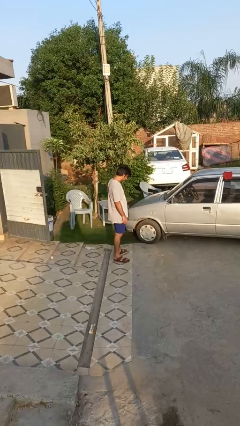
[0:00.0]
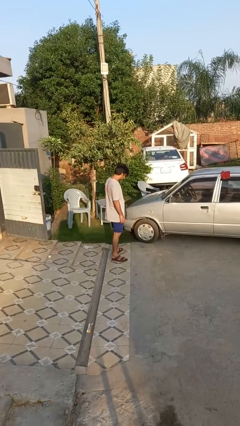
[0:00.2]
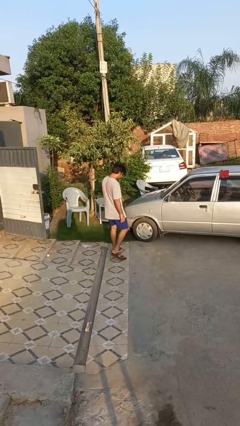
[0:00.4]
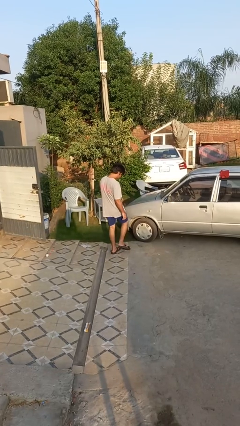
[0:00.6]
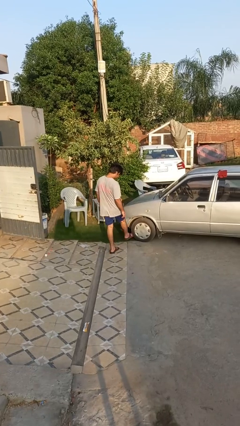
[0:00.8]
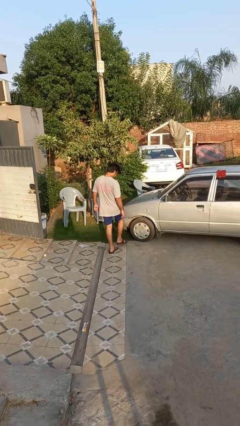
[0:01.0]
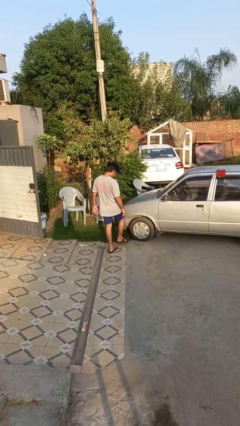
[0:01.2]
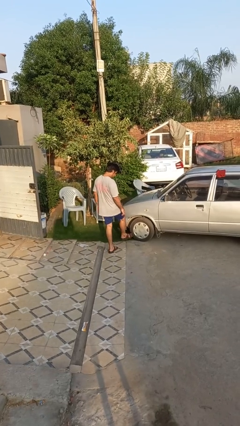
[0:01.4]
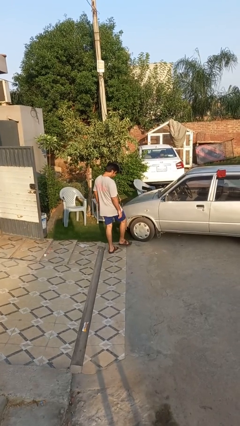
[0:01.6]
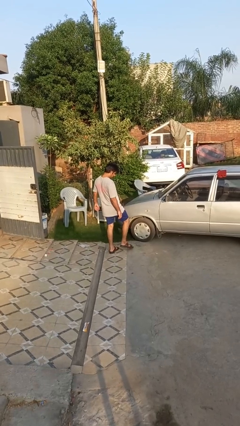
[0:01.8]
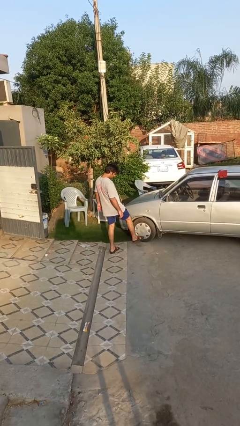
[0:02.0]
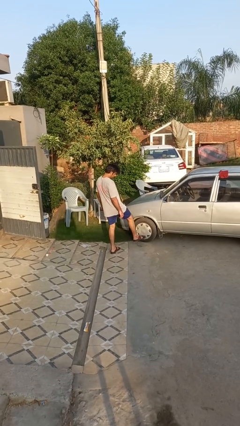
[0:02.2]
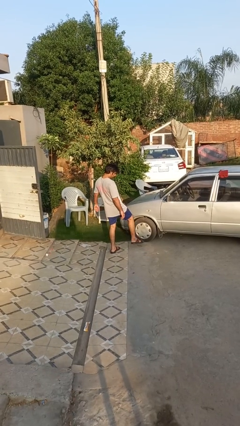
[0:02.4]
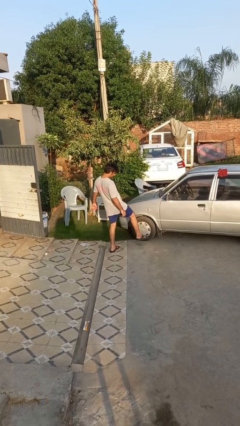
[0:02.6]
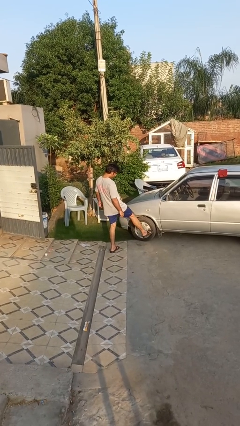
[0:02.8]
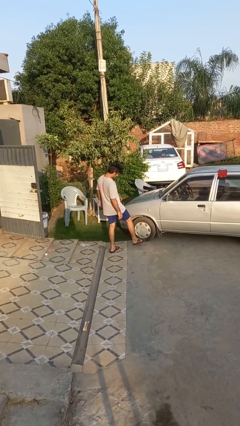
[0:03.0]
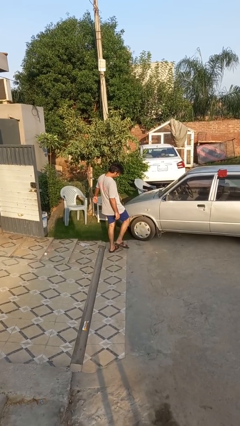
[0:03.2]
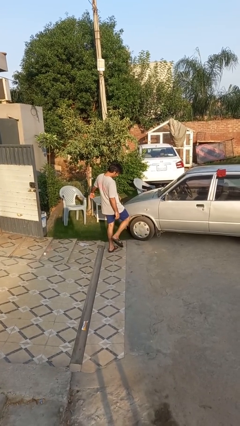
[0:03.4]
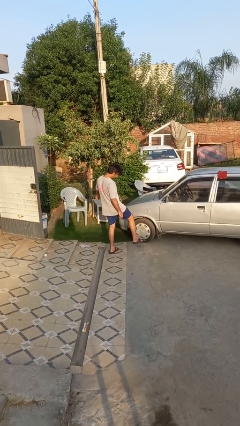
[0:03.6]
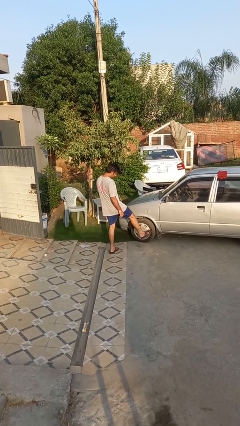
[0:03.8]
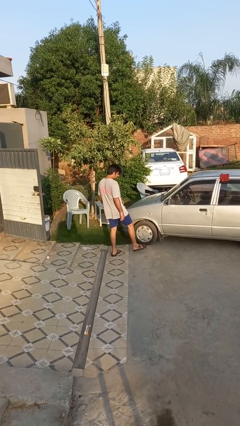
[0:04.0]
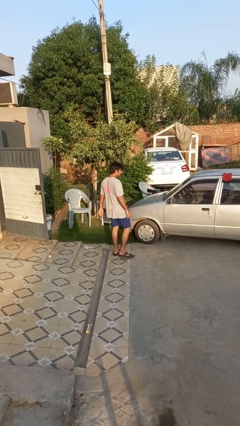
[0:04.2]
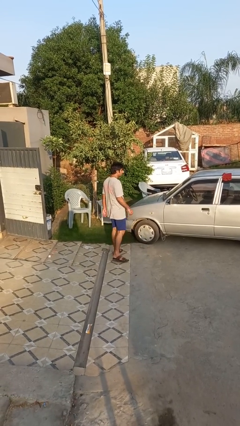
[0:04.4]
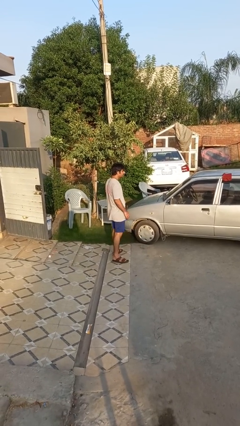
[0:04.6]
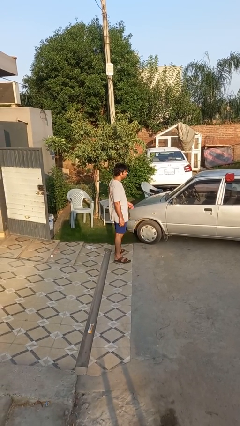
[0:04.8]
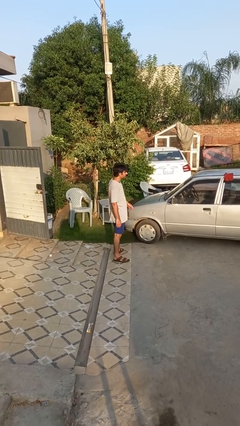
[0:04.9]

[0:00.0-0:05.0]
person kicks car tires

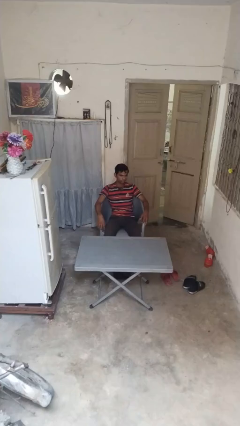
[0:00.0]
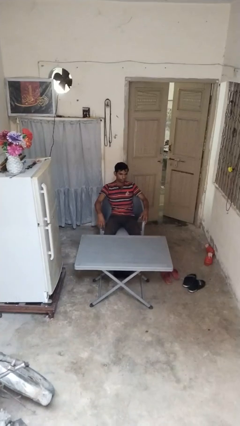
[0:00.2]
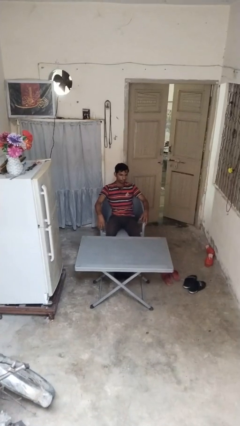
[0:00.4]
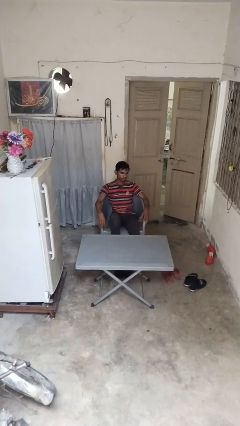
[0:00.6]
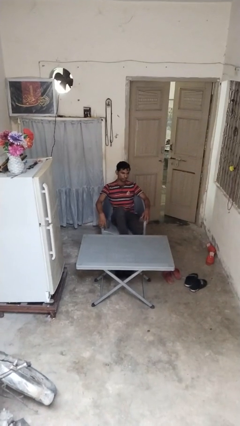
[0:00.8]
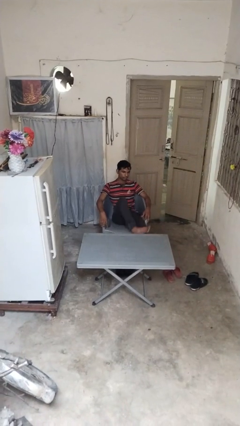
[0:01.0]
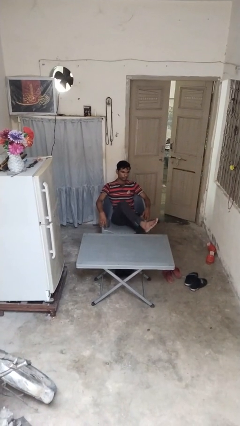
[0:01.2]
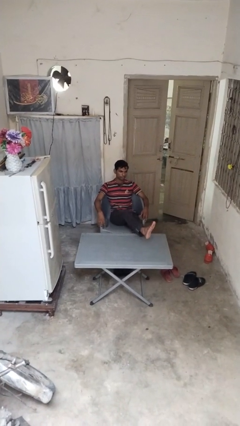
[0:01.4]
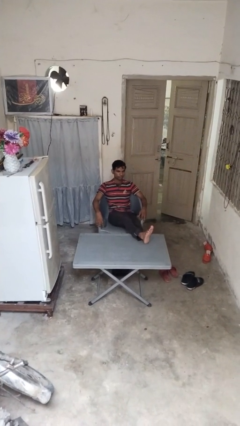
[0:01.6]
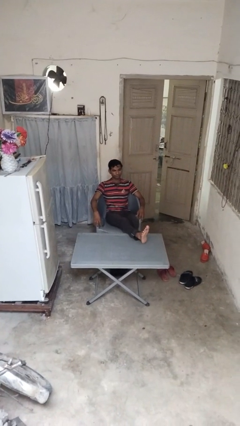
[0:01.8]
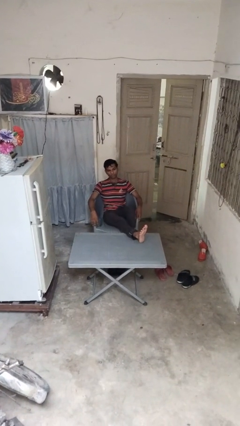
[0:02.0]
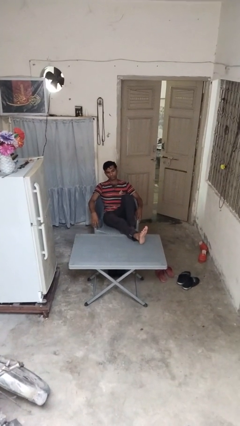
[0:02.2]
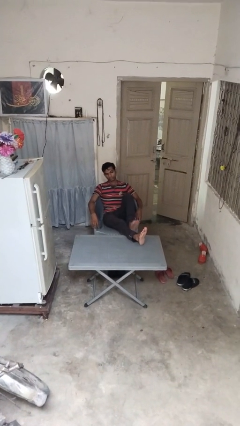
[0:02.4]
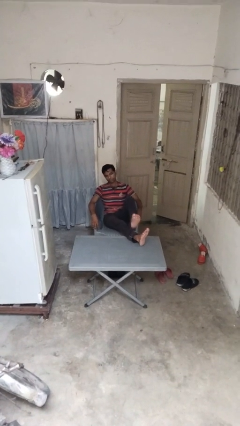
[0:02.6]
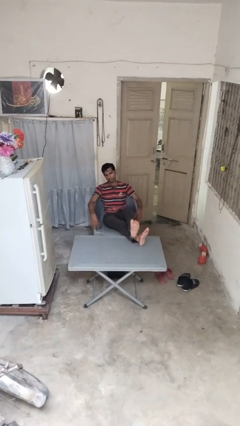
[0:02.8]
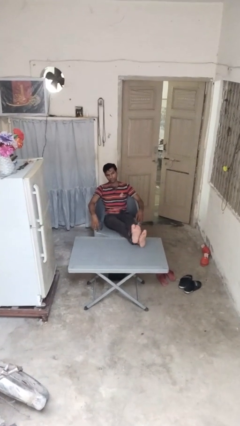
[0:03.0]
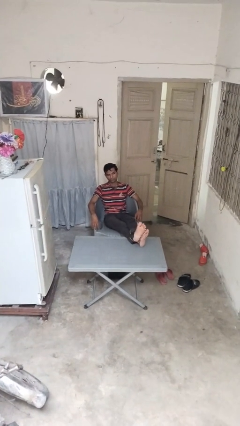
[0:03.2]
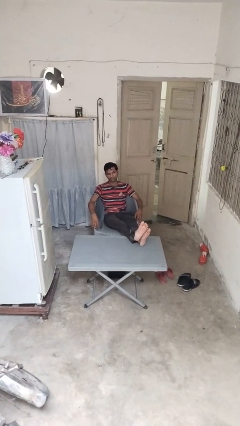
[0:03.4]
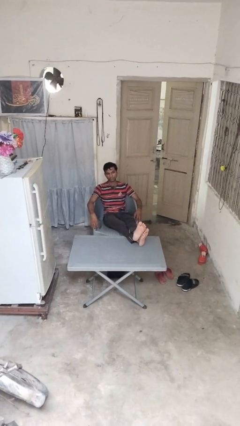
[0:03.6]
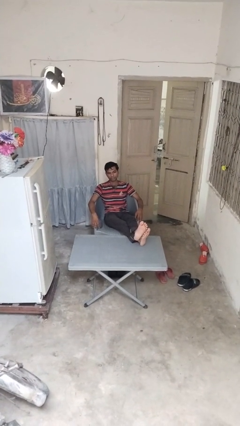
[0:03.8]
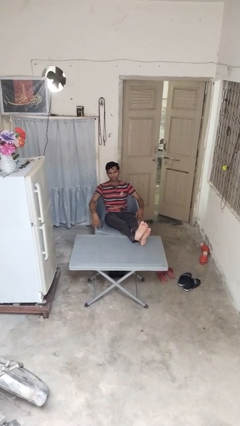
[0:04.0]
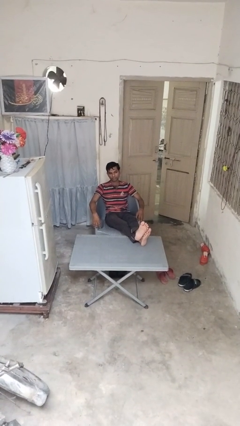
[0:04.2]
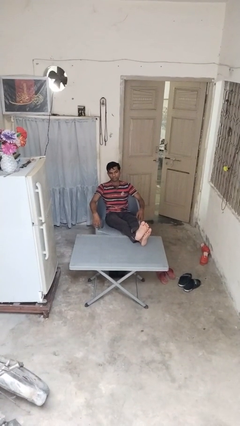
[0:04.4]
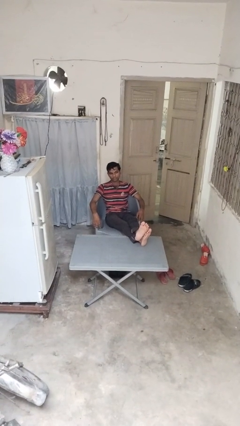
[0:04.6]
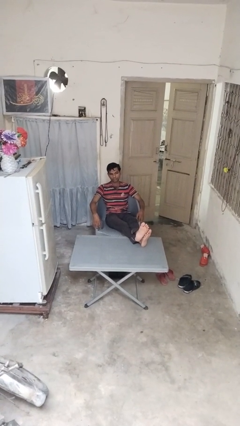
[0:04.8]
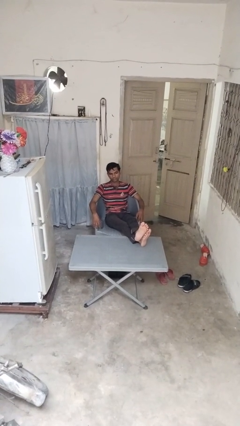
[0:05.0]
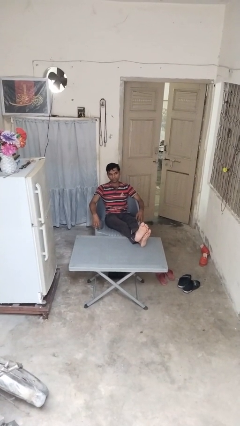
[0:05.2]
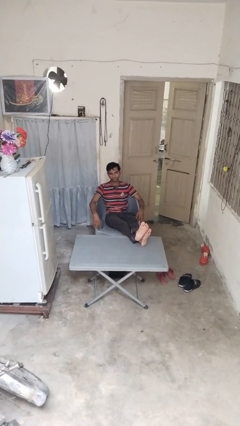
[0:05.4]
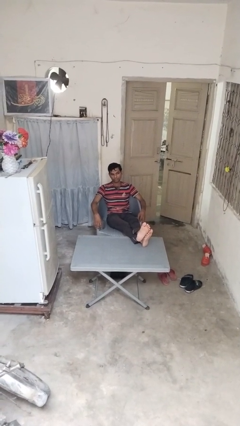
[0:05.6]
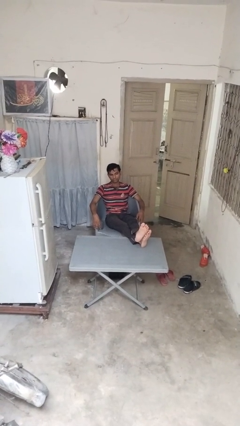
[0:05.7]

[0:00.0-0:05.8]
person puts feet up

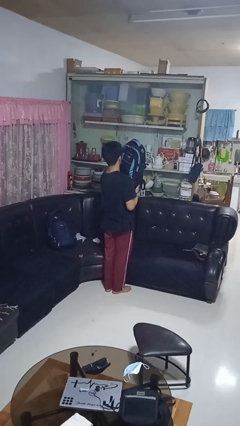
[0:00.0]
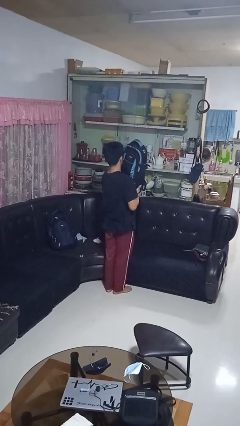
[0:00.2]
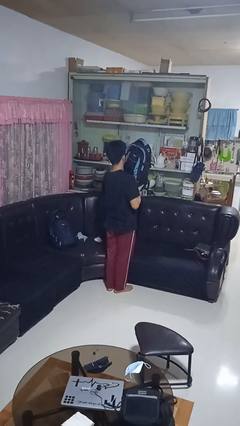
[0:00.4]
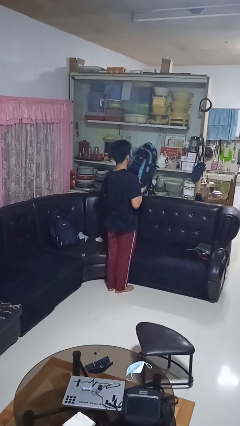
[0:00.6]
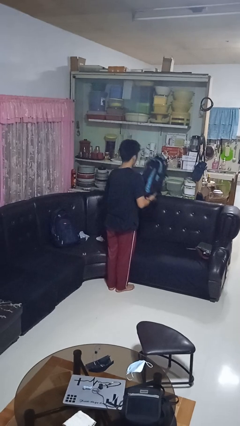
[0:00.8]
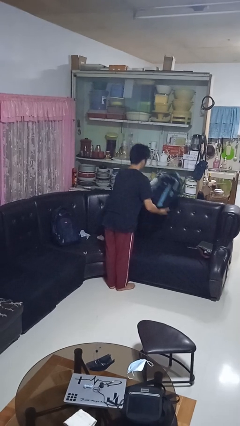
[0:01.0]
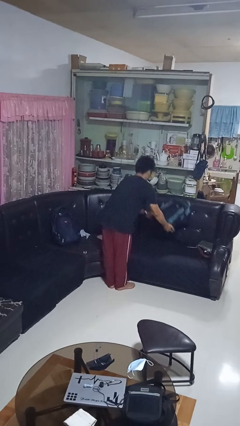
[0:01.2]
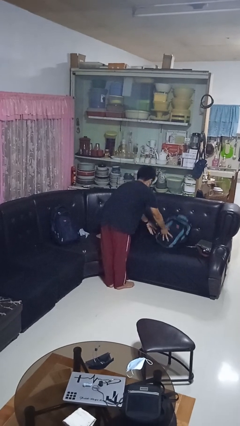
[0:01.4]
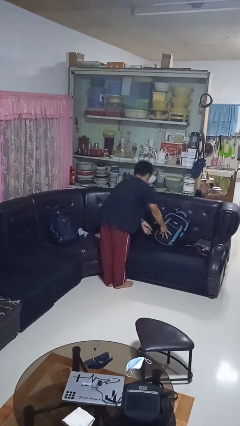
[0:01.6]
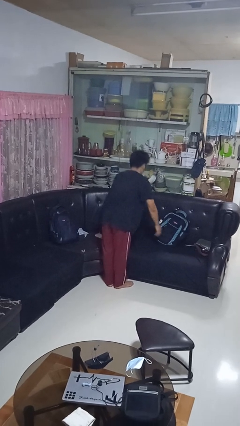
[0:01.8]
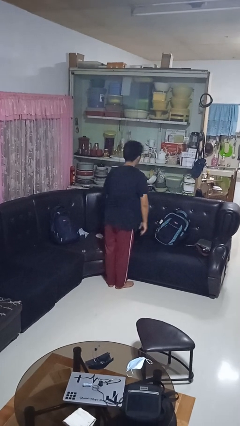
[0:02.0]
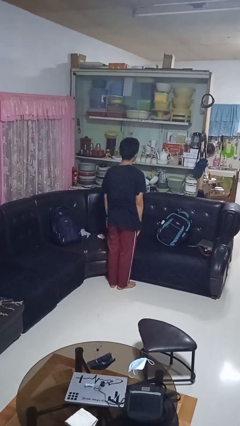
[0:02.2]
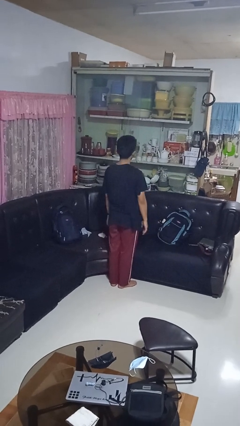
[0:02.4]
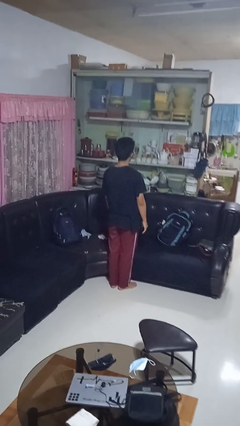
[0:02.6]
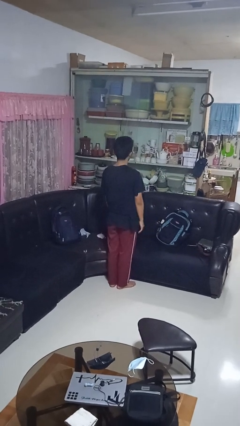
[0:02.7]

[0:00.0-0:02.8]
person puts down object on couch

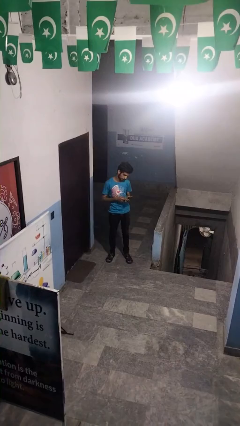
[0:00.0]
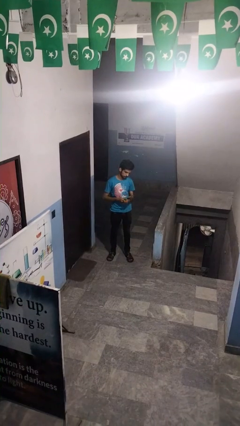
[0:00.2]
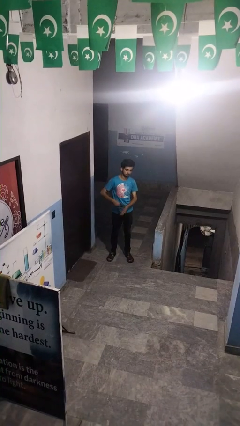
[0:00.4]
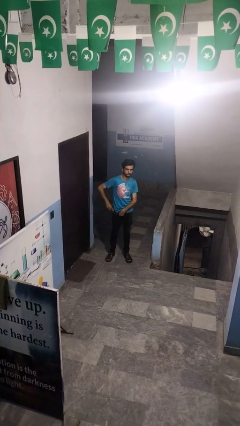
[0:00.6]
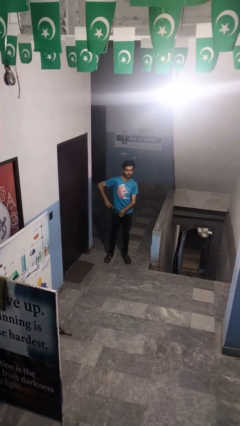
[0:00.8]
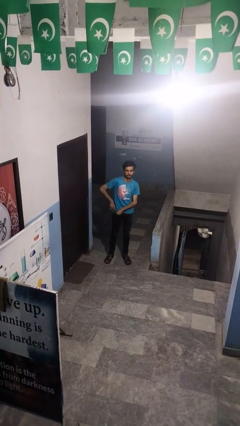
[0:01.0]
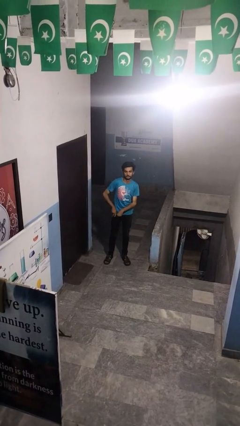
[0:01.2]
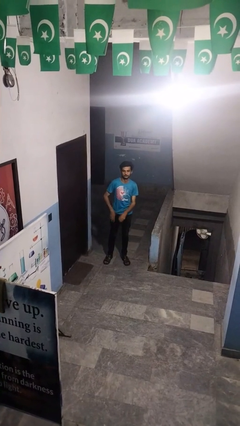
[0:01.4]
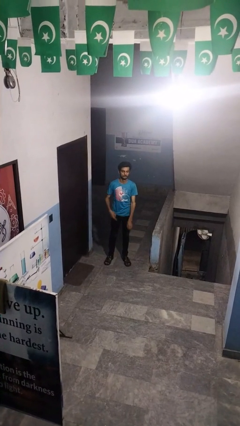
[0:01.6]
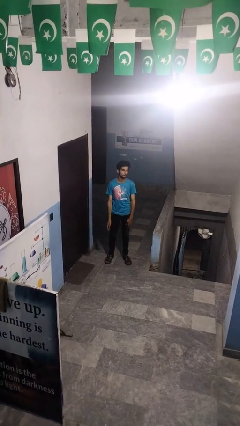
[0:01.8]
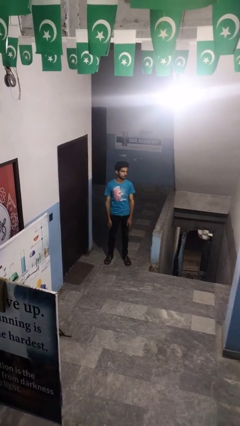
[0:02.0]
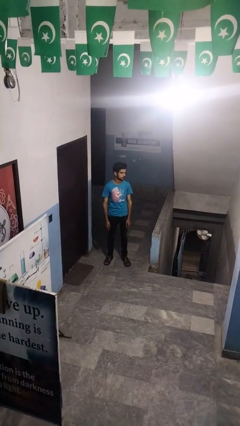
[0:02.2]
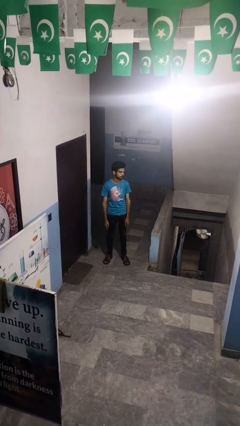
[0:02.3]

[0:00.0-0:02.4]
person puts phone into pocket

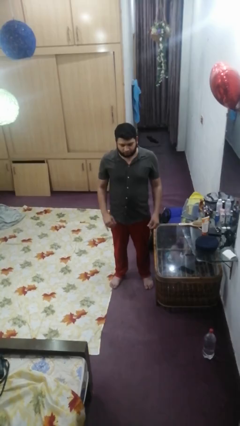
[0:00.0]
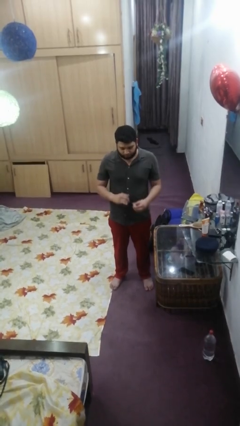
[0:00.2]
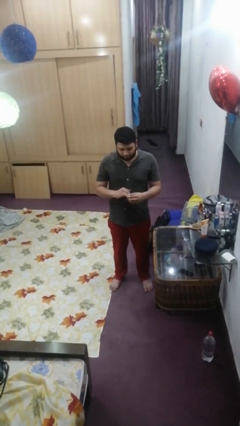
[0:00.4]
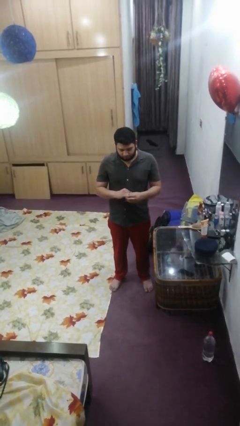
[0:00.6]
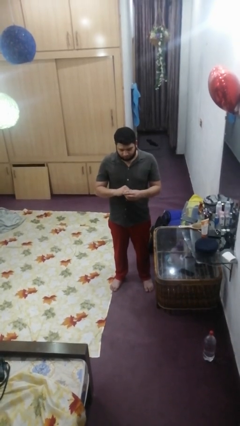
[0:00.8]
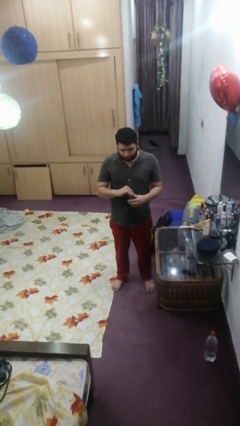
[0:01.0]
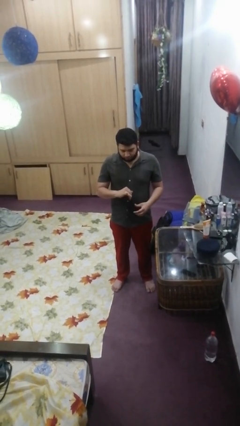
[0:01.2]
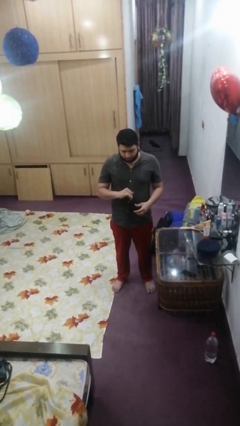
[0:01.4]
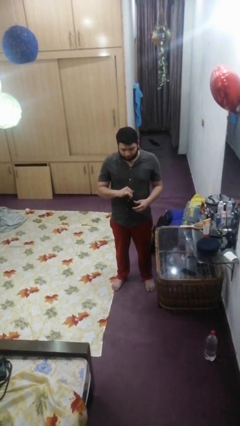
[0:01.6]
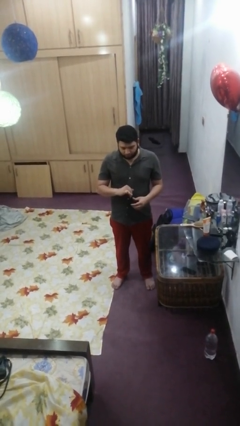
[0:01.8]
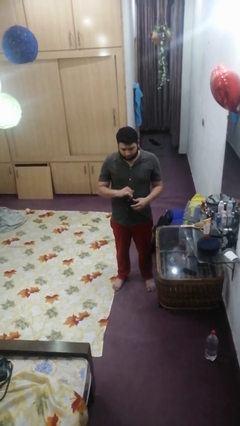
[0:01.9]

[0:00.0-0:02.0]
person puts on ring
